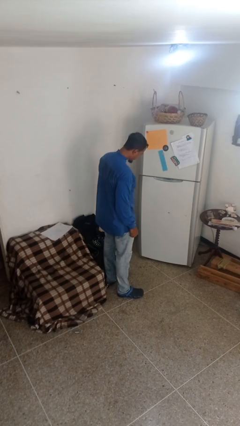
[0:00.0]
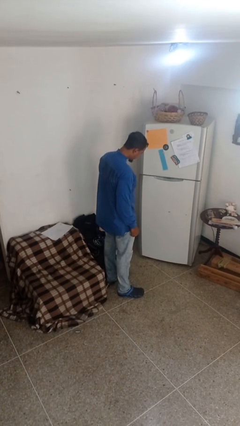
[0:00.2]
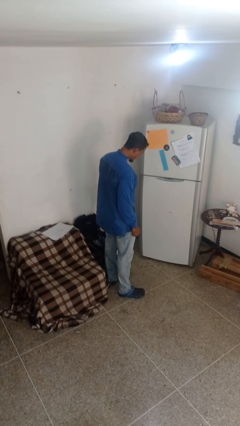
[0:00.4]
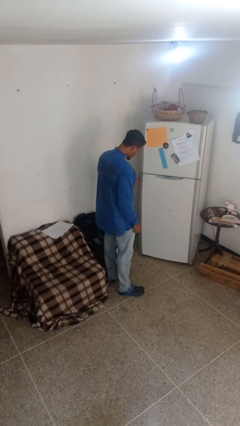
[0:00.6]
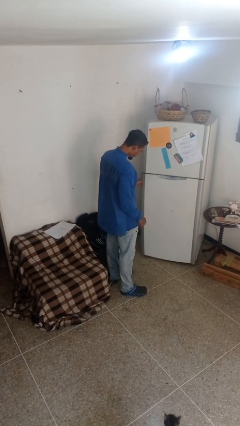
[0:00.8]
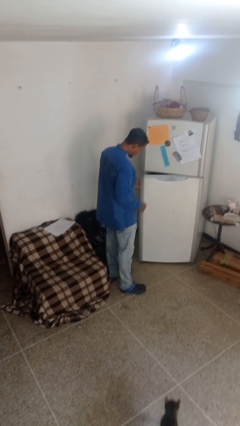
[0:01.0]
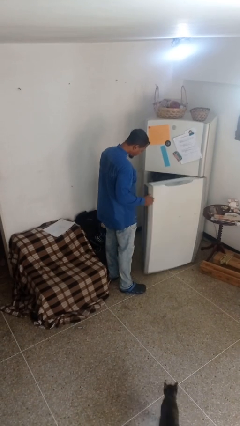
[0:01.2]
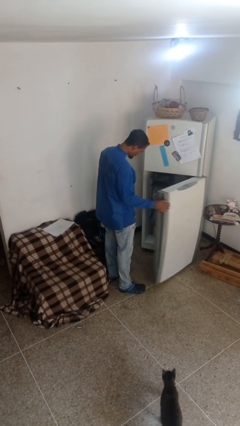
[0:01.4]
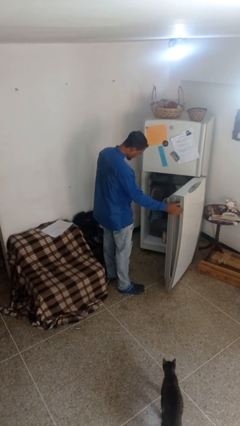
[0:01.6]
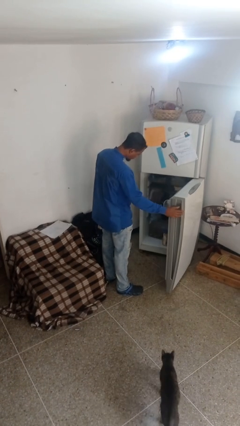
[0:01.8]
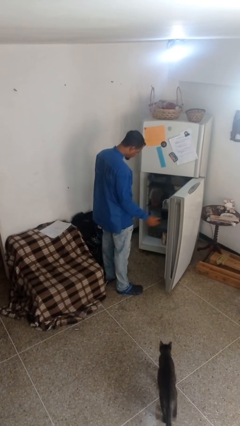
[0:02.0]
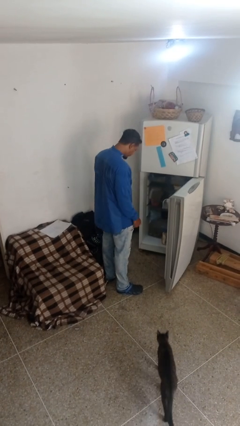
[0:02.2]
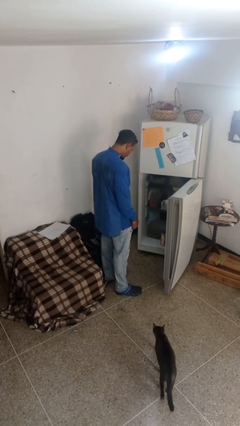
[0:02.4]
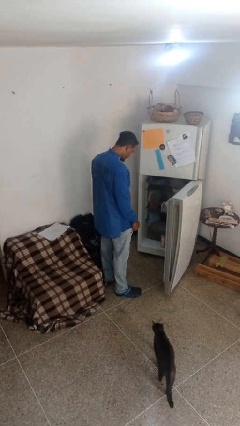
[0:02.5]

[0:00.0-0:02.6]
person opens refrigerator

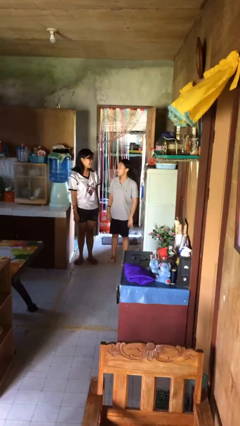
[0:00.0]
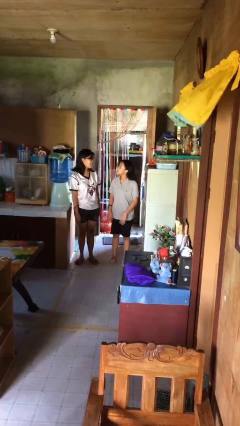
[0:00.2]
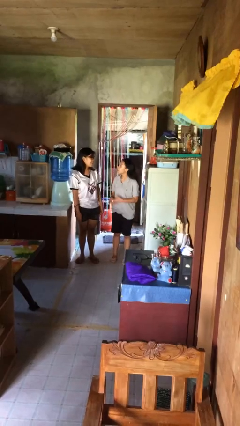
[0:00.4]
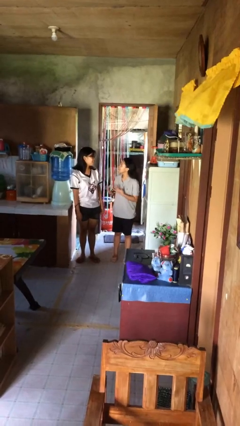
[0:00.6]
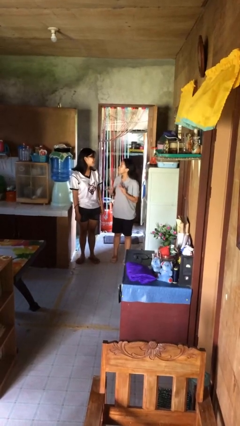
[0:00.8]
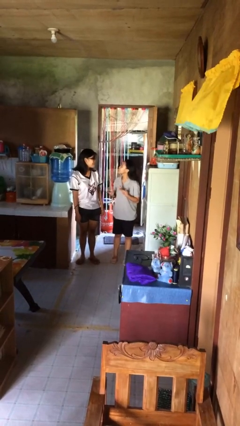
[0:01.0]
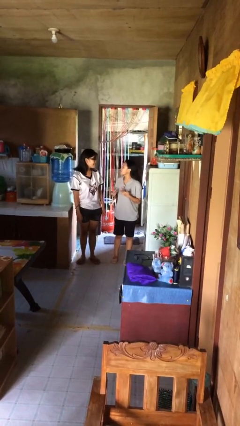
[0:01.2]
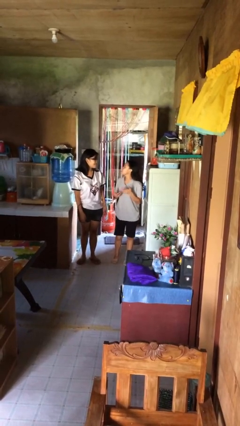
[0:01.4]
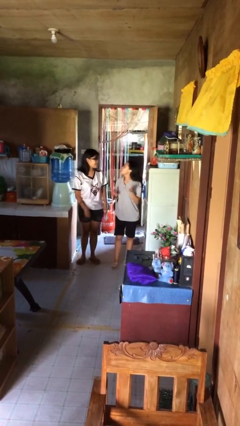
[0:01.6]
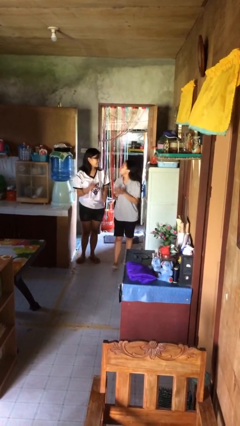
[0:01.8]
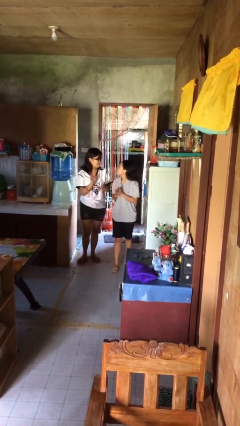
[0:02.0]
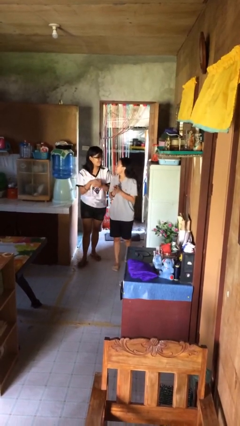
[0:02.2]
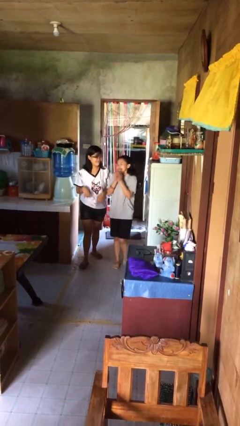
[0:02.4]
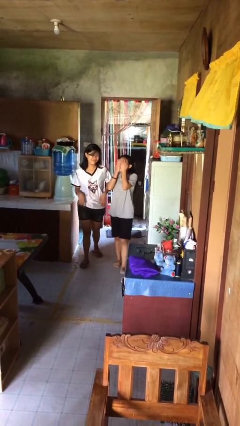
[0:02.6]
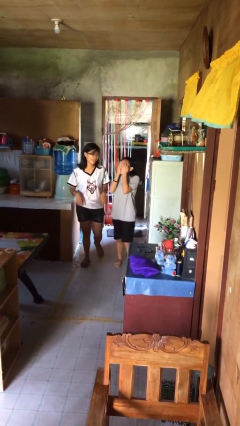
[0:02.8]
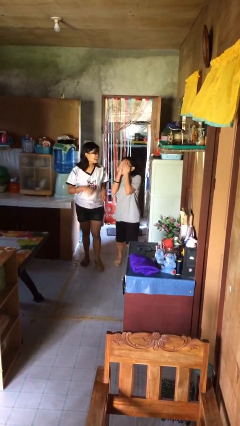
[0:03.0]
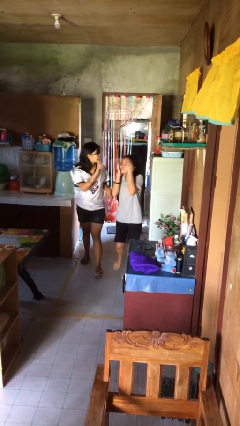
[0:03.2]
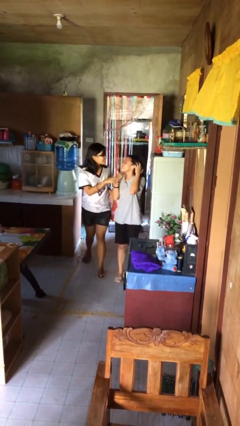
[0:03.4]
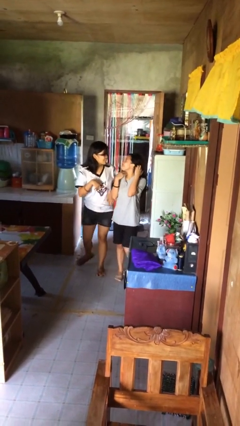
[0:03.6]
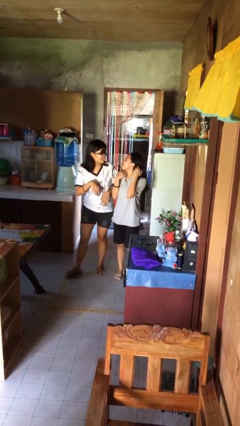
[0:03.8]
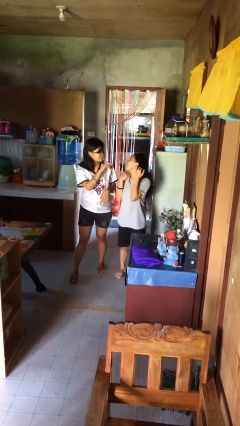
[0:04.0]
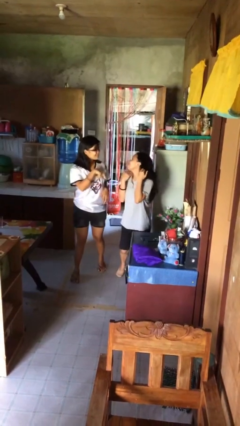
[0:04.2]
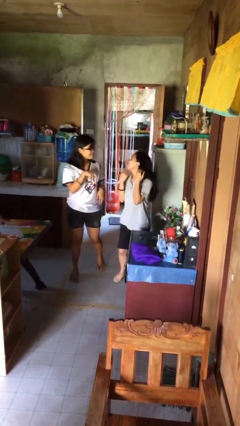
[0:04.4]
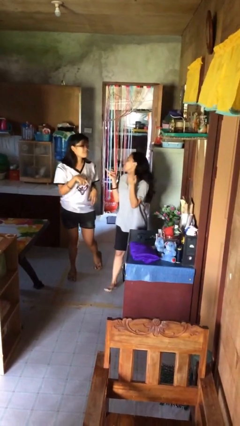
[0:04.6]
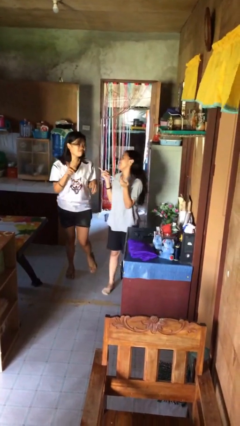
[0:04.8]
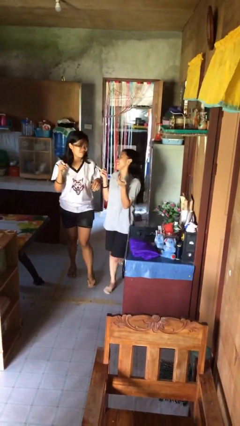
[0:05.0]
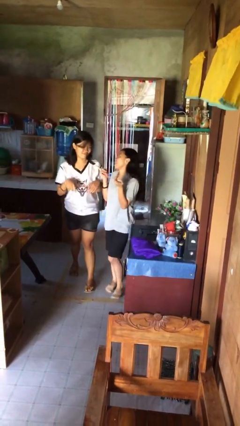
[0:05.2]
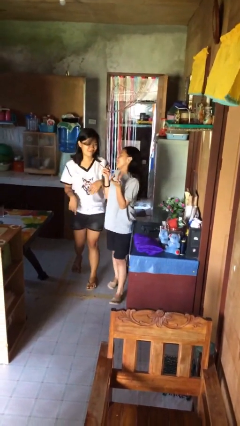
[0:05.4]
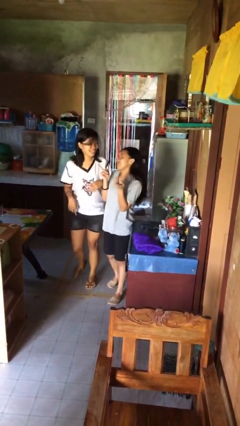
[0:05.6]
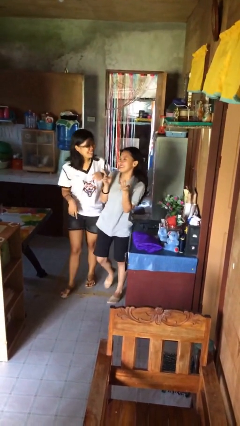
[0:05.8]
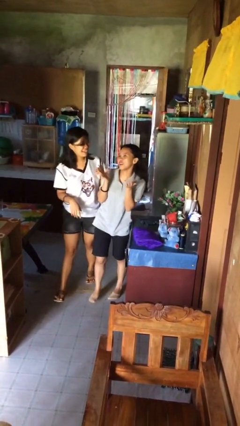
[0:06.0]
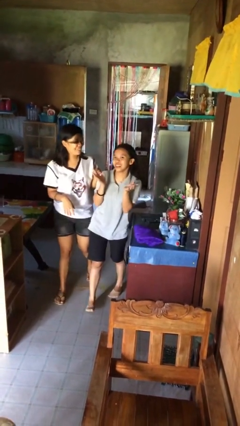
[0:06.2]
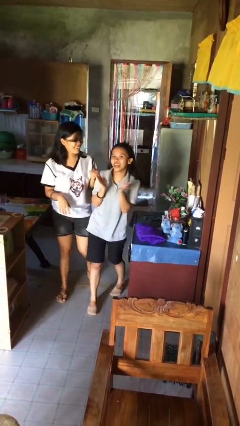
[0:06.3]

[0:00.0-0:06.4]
person talks to person

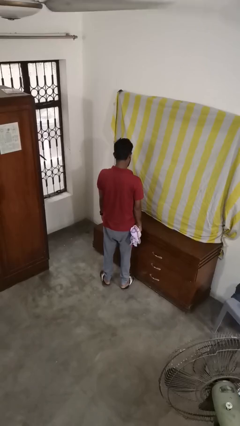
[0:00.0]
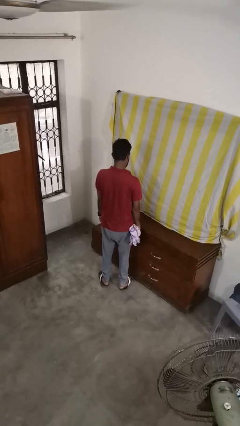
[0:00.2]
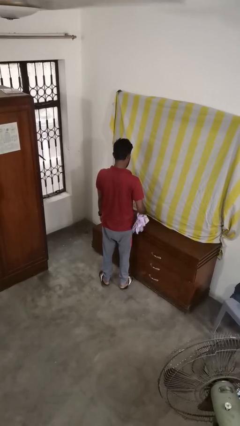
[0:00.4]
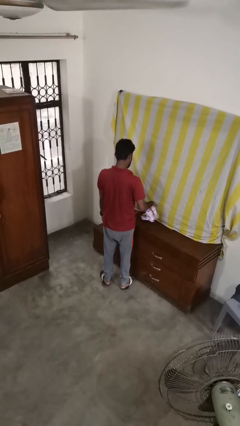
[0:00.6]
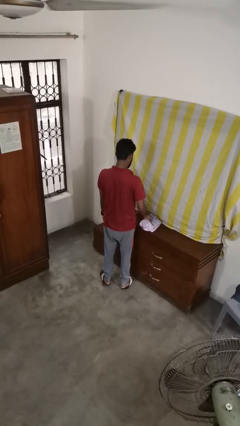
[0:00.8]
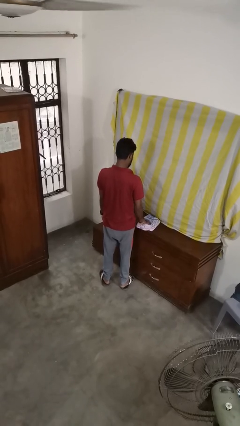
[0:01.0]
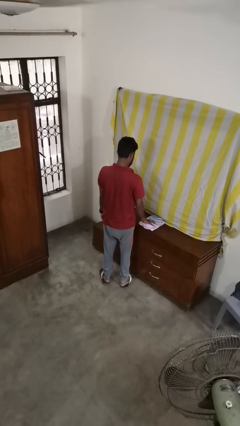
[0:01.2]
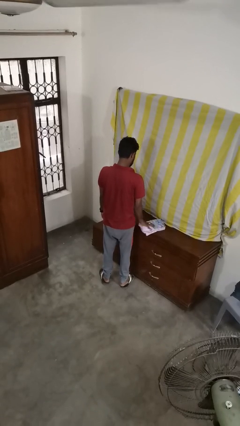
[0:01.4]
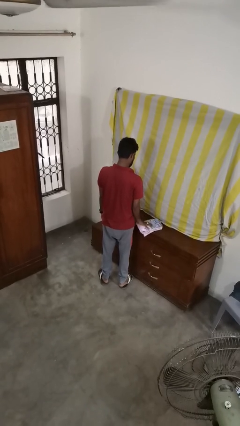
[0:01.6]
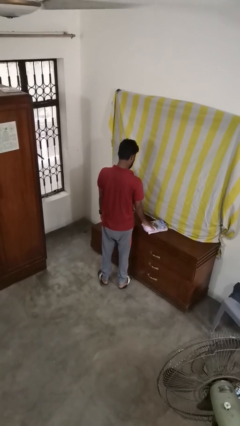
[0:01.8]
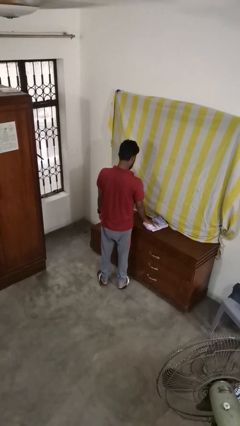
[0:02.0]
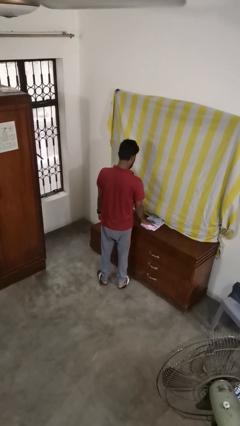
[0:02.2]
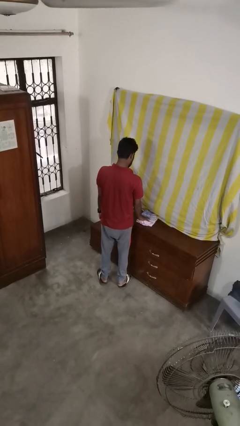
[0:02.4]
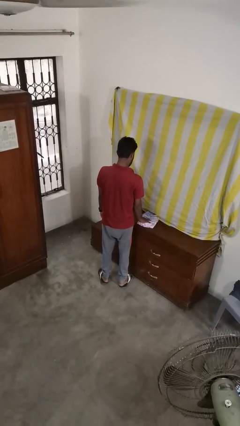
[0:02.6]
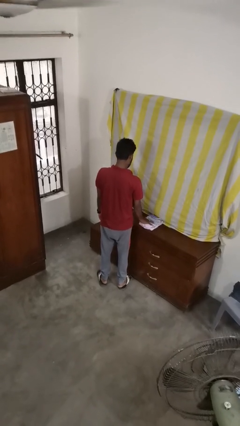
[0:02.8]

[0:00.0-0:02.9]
person cleans table with rag

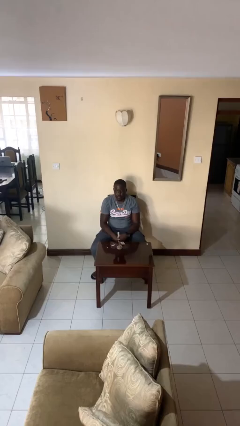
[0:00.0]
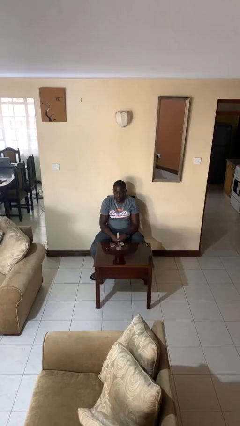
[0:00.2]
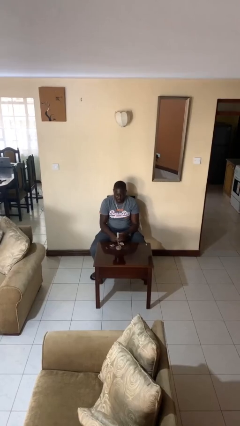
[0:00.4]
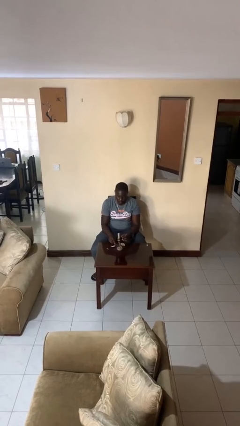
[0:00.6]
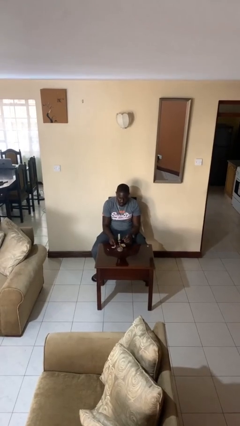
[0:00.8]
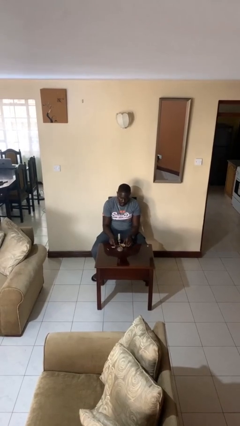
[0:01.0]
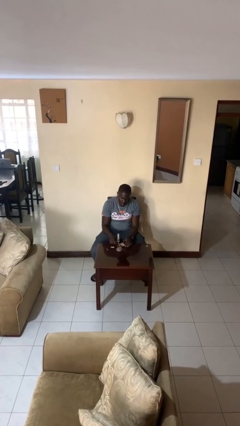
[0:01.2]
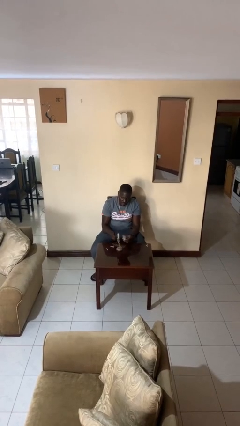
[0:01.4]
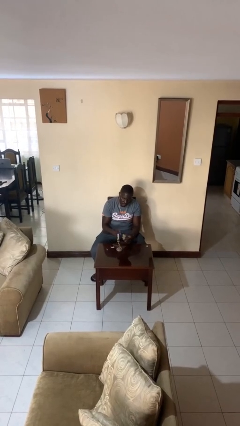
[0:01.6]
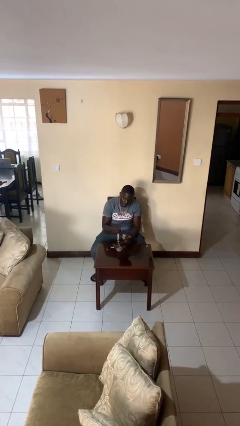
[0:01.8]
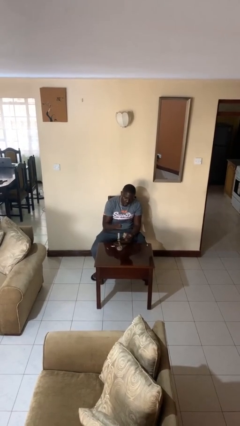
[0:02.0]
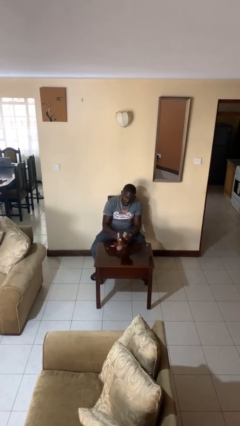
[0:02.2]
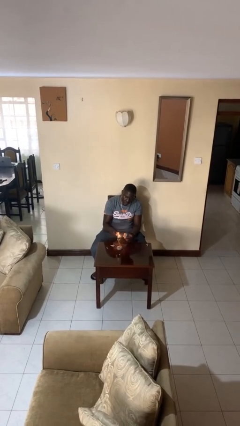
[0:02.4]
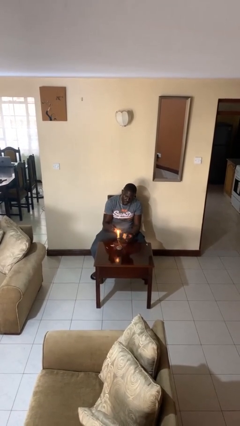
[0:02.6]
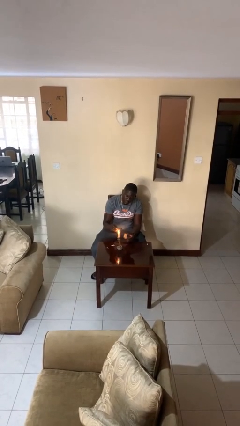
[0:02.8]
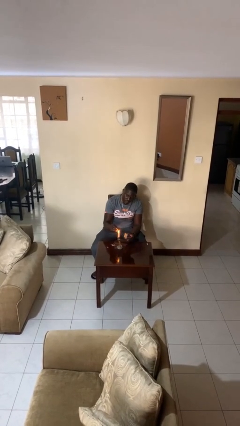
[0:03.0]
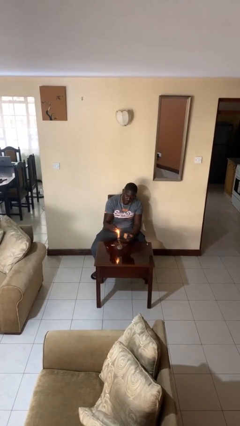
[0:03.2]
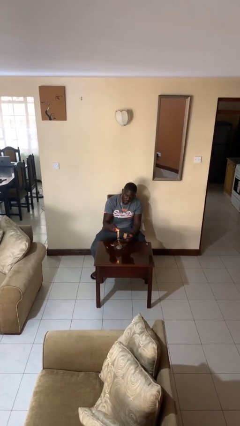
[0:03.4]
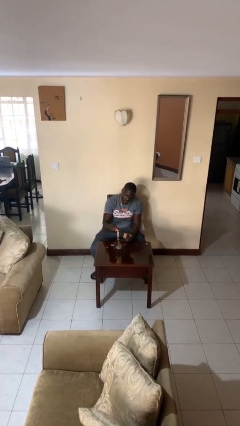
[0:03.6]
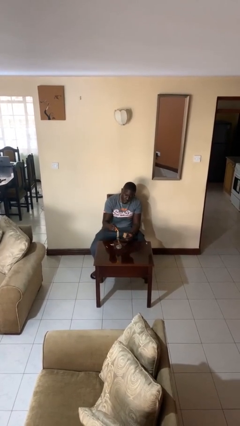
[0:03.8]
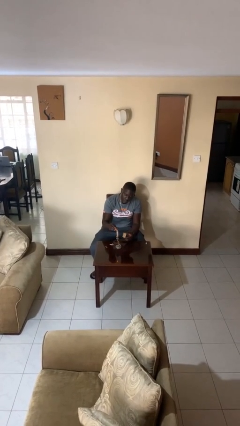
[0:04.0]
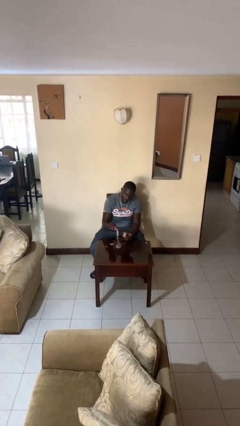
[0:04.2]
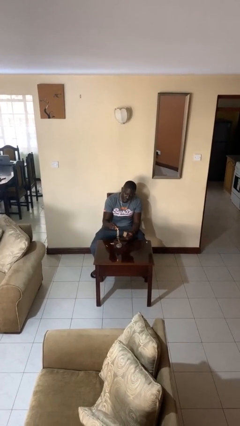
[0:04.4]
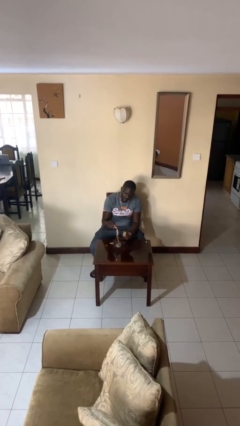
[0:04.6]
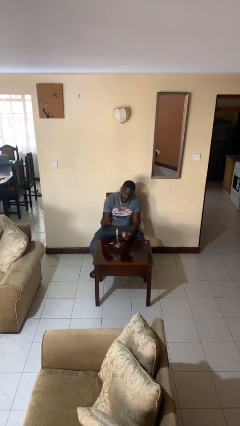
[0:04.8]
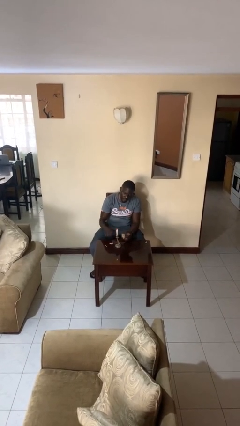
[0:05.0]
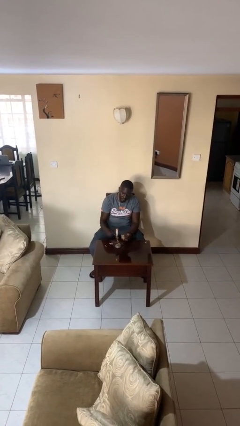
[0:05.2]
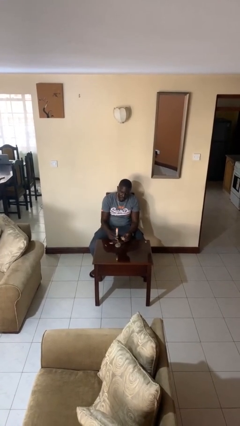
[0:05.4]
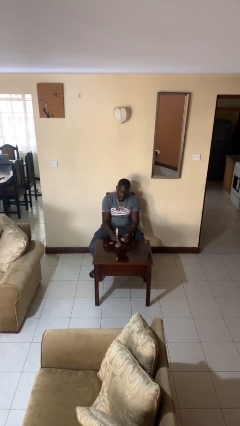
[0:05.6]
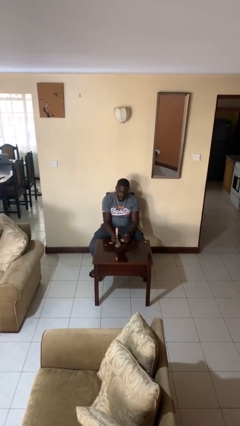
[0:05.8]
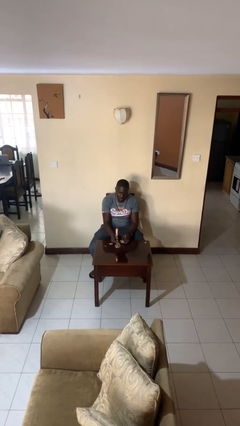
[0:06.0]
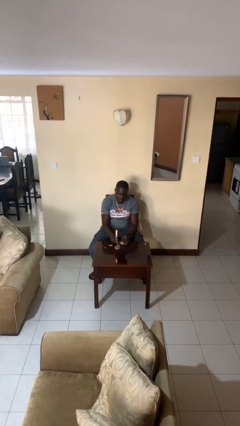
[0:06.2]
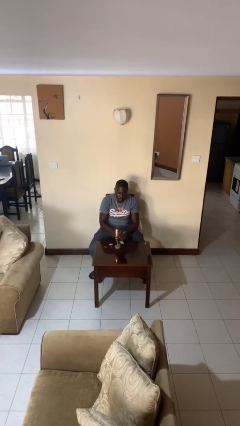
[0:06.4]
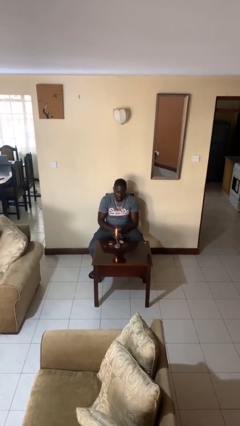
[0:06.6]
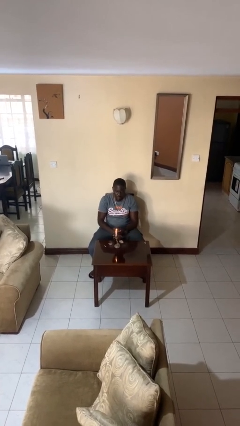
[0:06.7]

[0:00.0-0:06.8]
person lights candle
